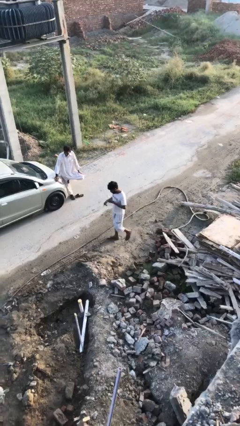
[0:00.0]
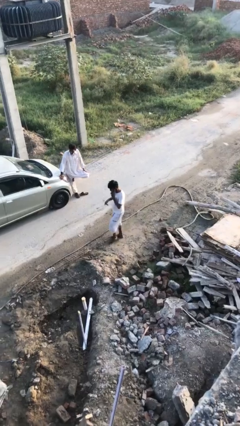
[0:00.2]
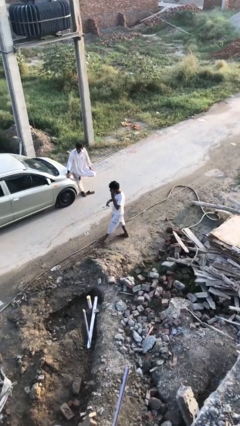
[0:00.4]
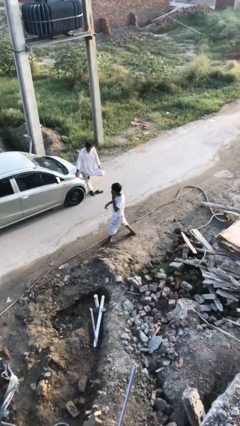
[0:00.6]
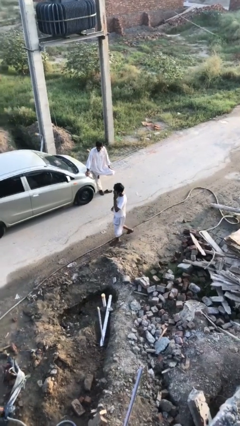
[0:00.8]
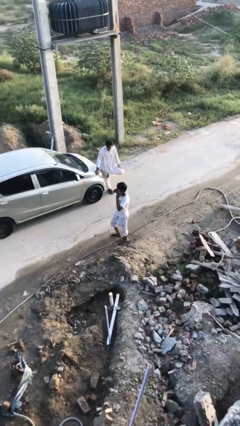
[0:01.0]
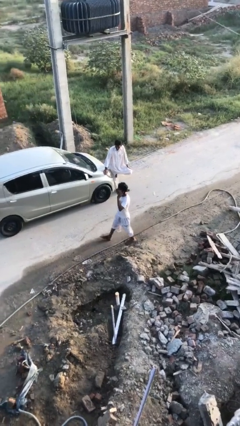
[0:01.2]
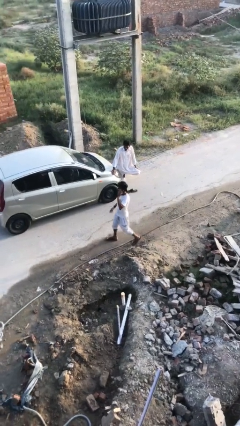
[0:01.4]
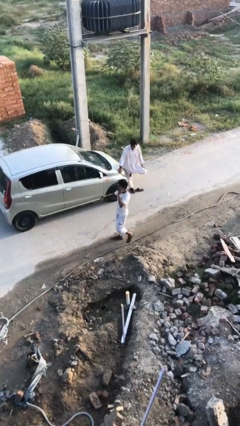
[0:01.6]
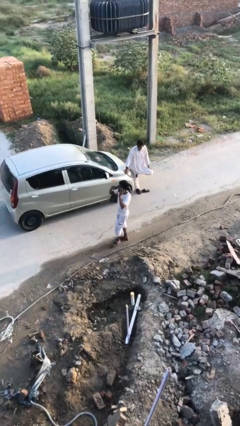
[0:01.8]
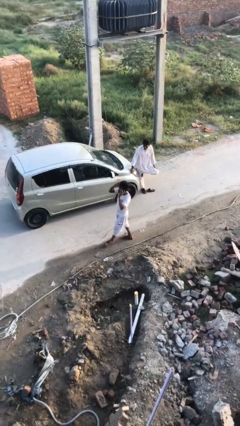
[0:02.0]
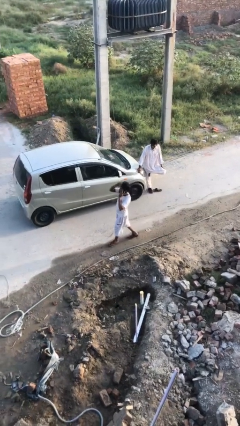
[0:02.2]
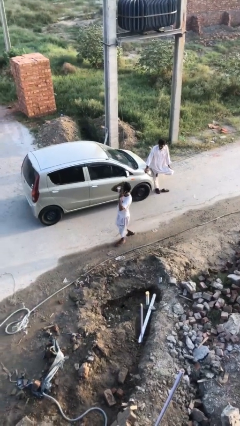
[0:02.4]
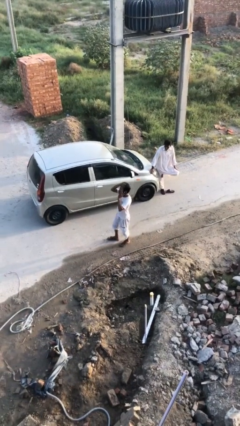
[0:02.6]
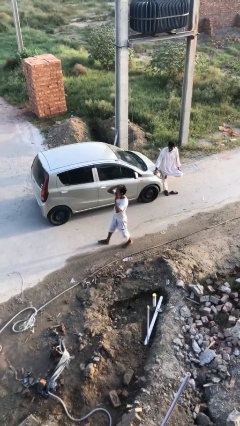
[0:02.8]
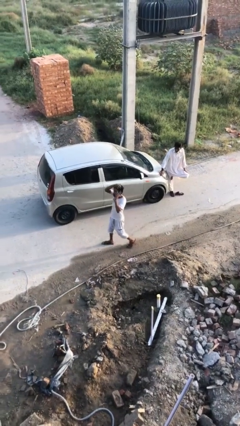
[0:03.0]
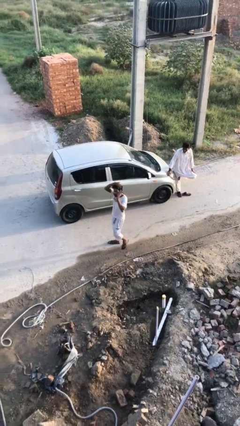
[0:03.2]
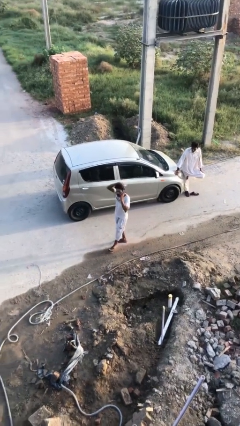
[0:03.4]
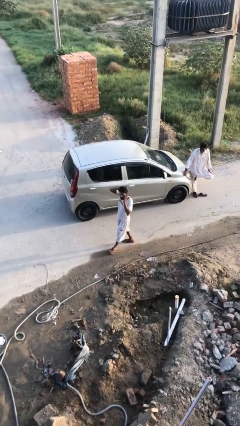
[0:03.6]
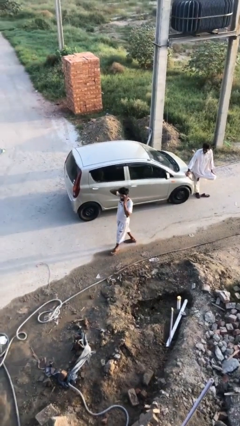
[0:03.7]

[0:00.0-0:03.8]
person talks on phone

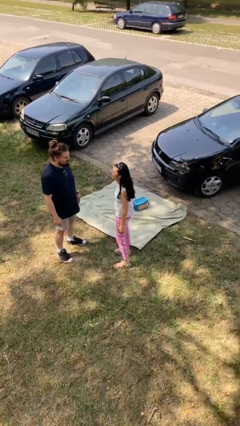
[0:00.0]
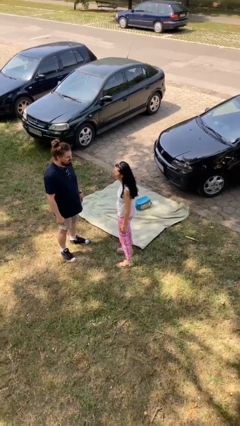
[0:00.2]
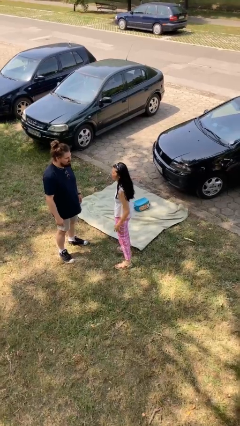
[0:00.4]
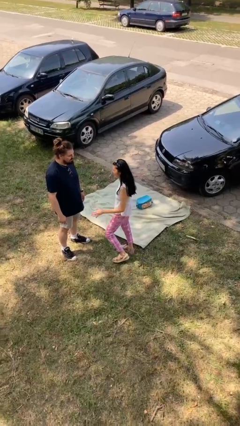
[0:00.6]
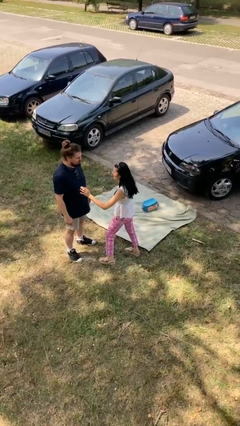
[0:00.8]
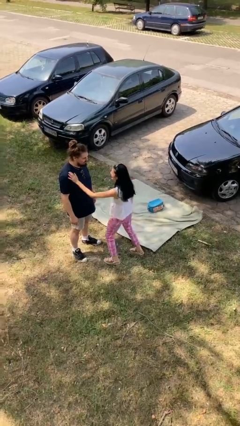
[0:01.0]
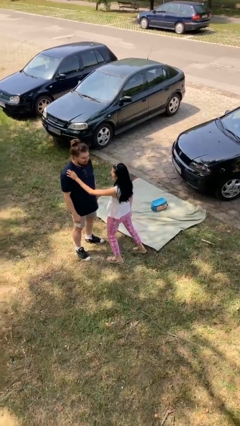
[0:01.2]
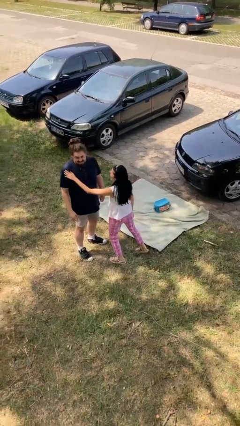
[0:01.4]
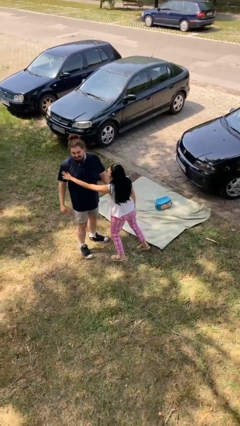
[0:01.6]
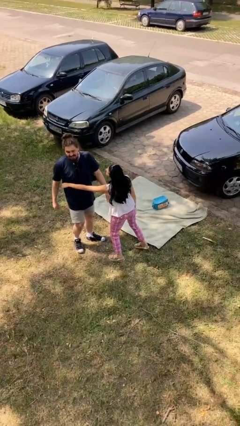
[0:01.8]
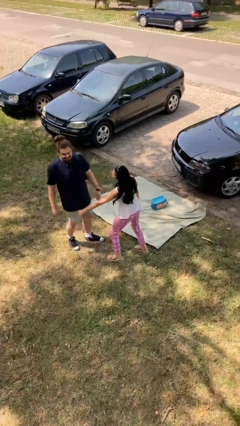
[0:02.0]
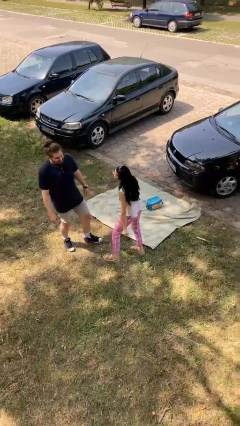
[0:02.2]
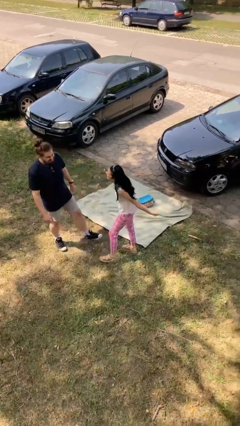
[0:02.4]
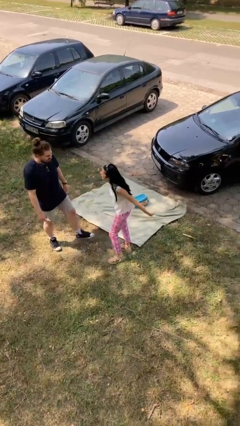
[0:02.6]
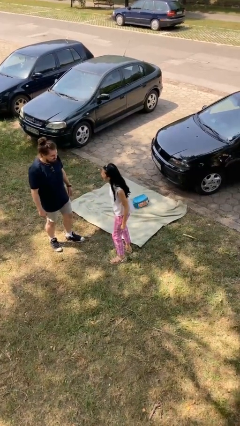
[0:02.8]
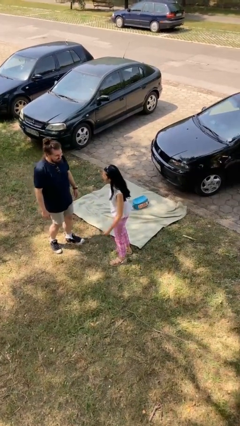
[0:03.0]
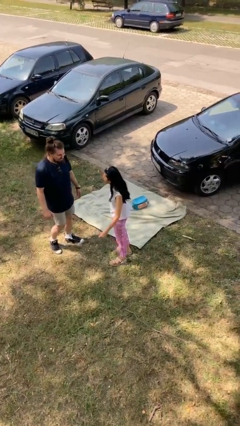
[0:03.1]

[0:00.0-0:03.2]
person shoves person

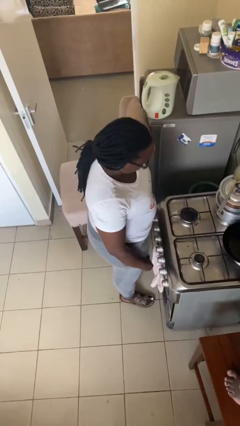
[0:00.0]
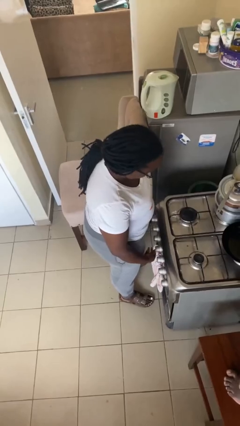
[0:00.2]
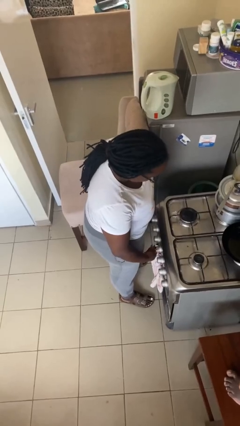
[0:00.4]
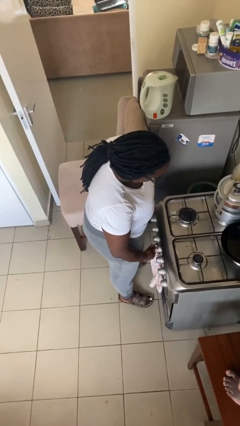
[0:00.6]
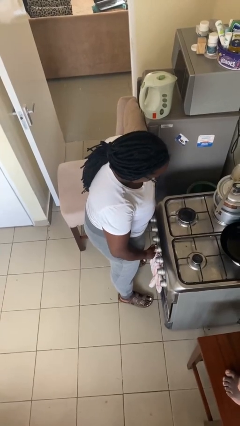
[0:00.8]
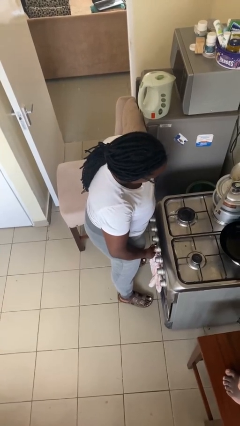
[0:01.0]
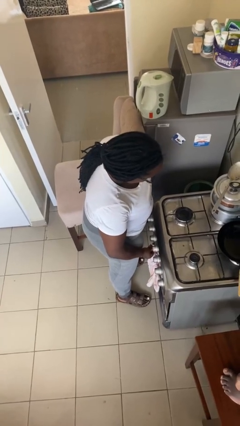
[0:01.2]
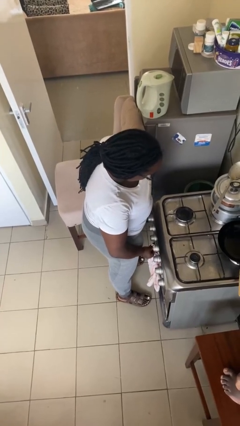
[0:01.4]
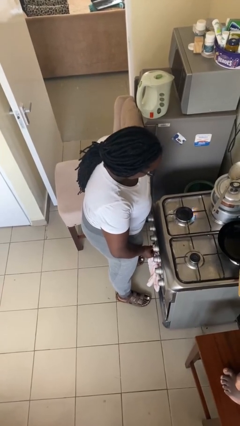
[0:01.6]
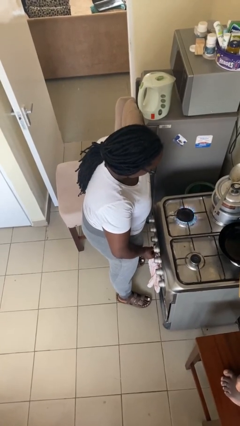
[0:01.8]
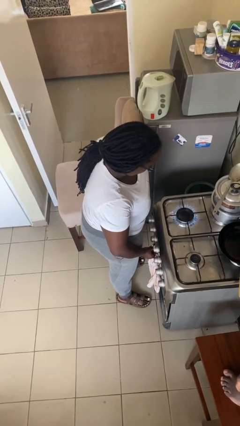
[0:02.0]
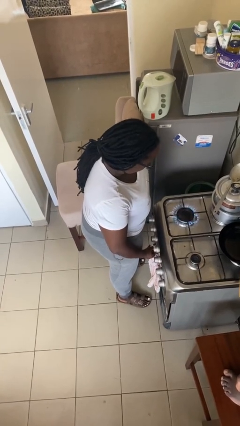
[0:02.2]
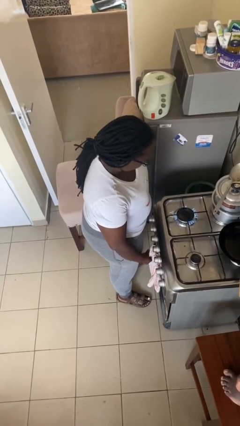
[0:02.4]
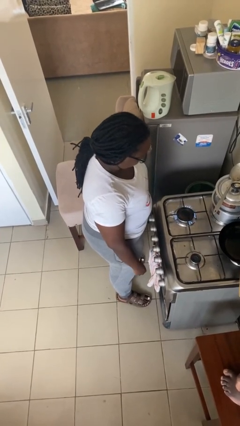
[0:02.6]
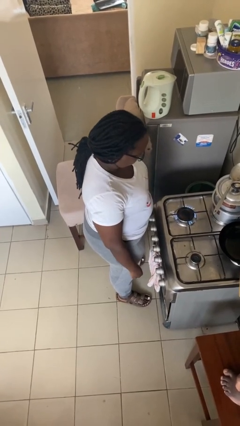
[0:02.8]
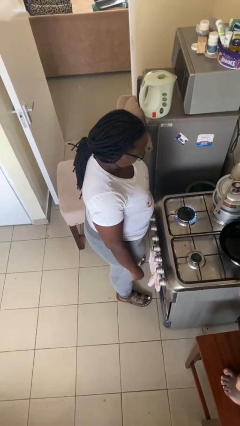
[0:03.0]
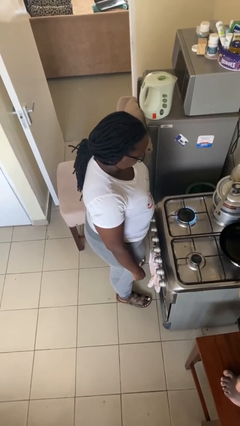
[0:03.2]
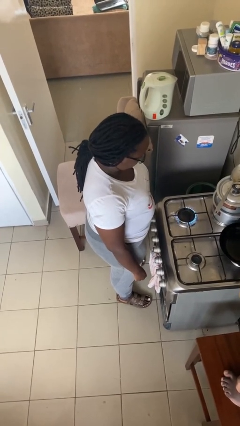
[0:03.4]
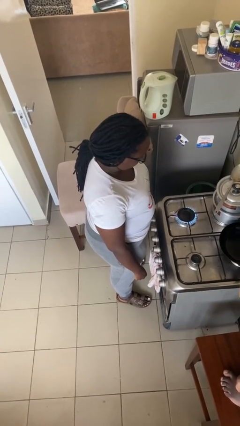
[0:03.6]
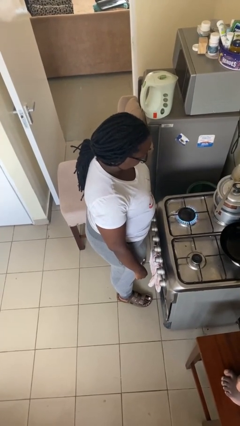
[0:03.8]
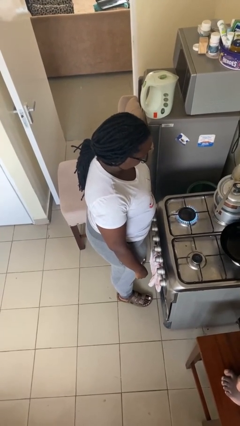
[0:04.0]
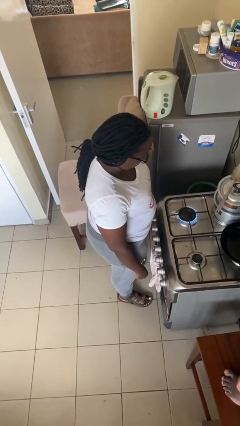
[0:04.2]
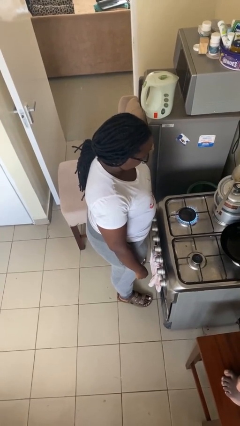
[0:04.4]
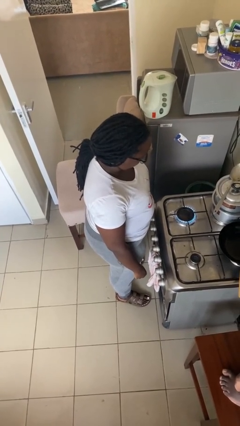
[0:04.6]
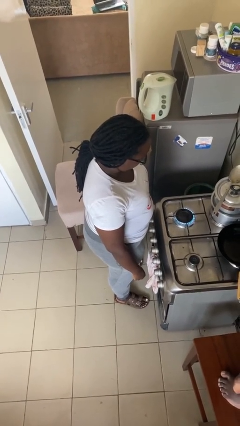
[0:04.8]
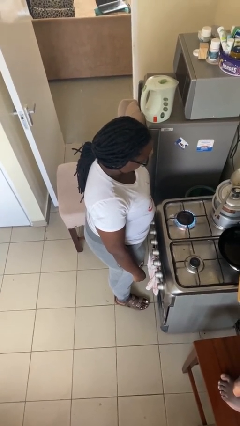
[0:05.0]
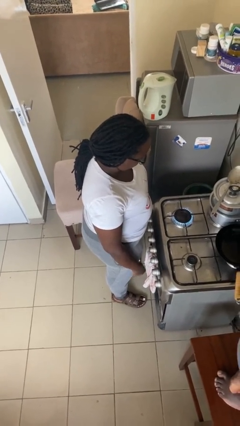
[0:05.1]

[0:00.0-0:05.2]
person turns on stovetop

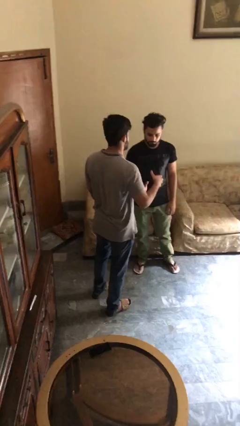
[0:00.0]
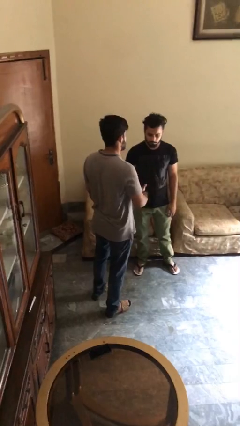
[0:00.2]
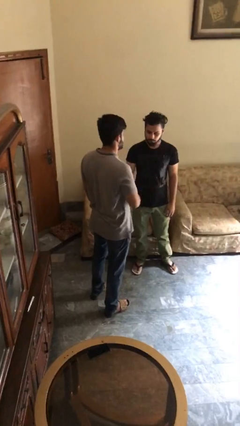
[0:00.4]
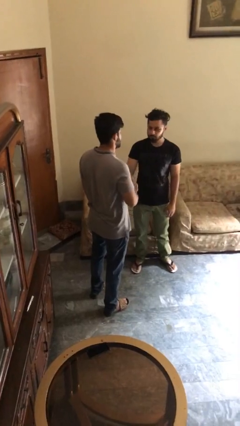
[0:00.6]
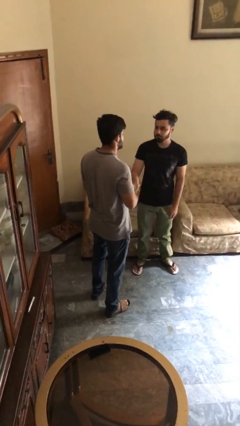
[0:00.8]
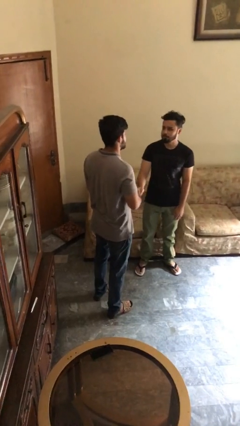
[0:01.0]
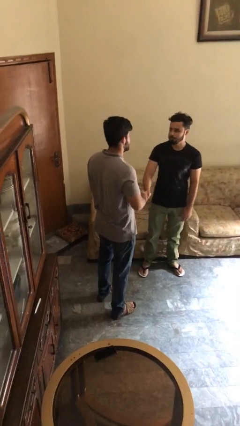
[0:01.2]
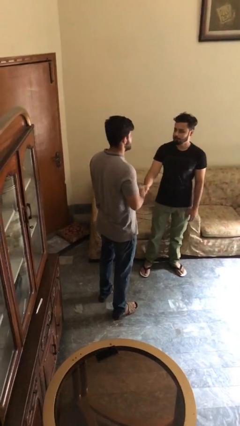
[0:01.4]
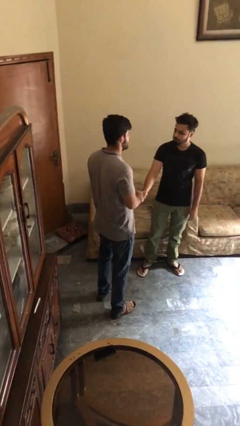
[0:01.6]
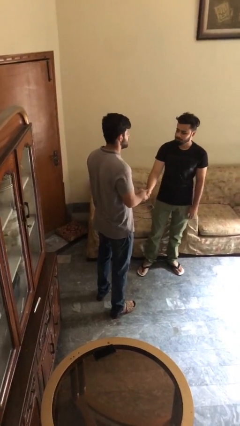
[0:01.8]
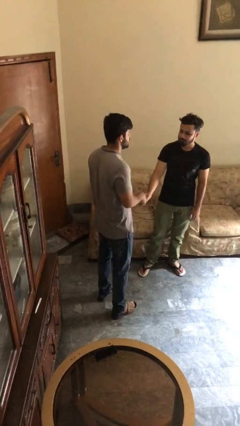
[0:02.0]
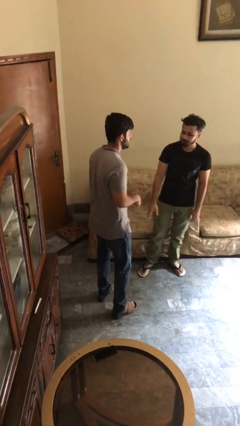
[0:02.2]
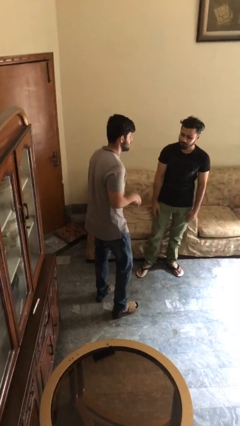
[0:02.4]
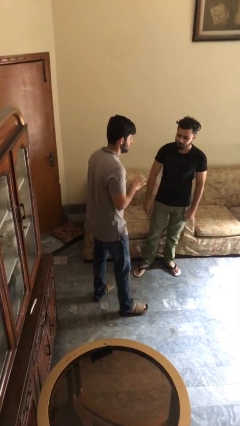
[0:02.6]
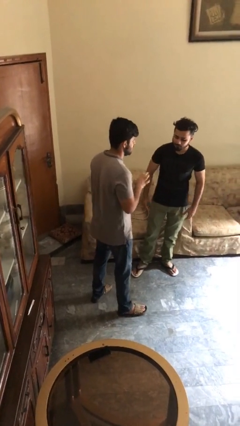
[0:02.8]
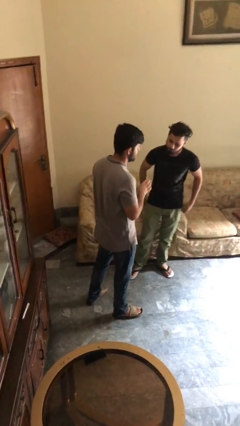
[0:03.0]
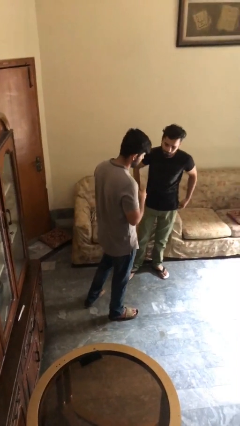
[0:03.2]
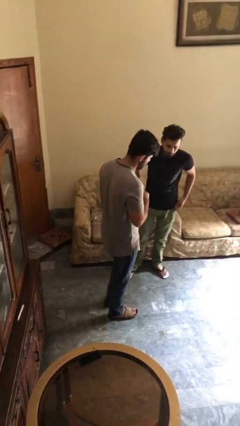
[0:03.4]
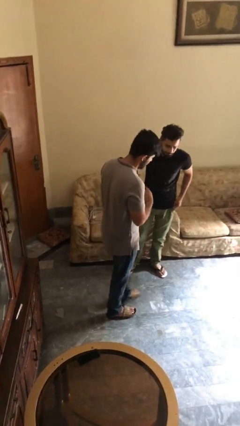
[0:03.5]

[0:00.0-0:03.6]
person shakes hand

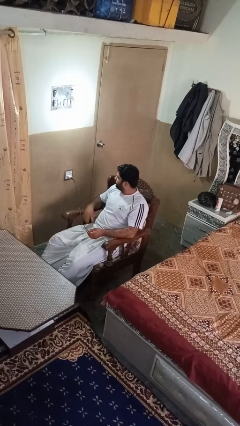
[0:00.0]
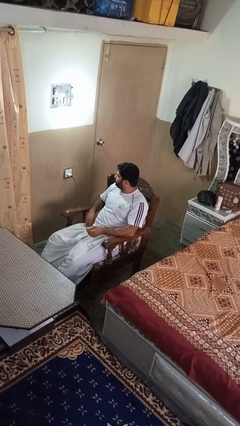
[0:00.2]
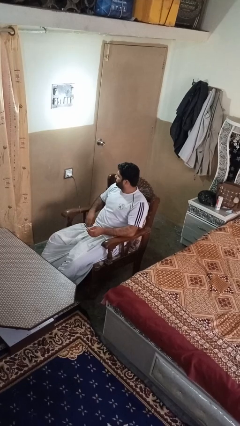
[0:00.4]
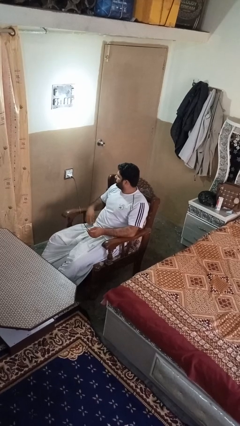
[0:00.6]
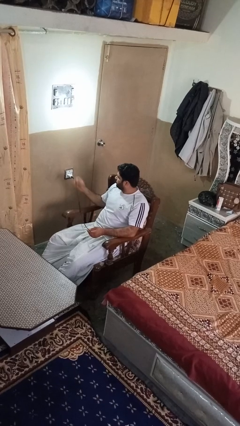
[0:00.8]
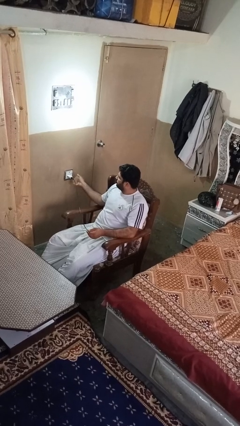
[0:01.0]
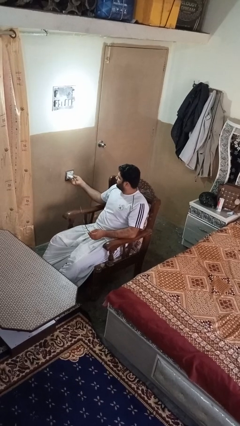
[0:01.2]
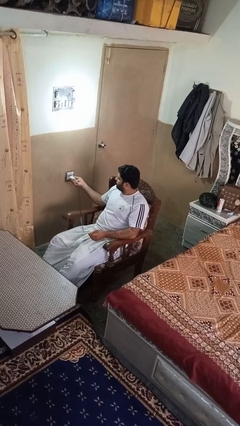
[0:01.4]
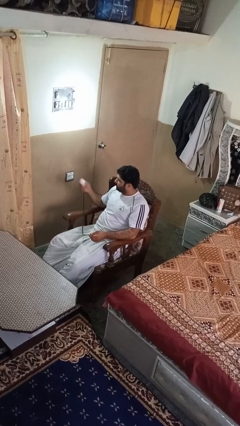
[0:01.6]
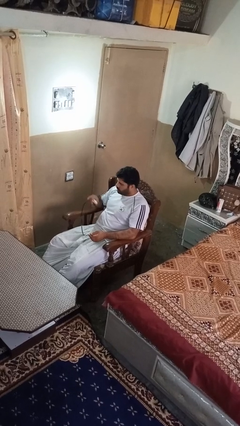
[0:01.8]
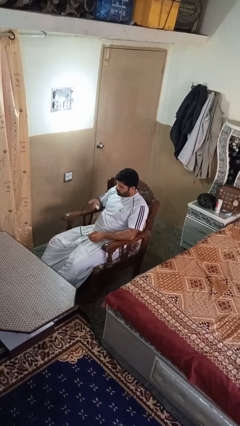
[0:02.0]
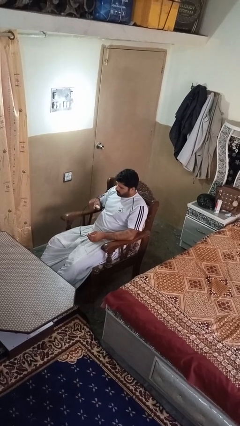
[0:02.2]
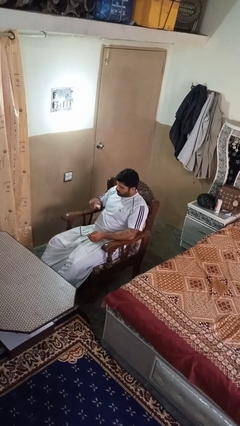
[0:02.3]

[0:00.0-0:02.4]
person unplugs from electrical socket
